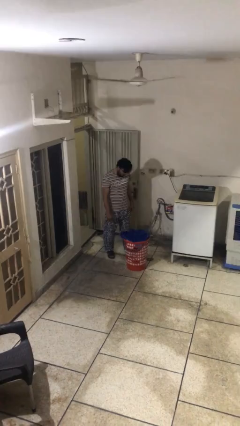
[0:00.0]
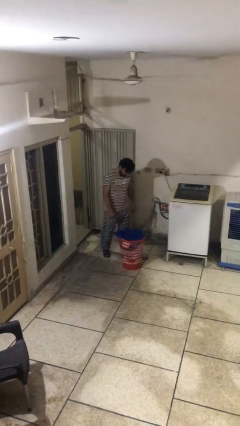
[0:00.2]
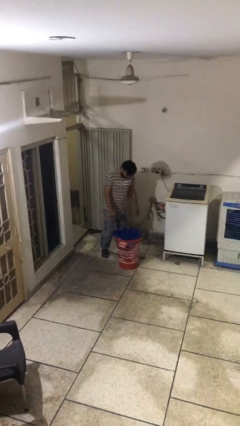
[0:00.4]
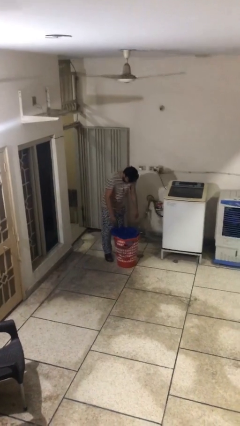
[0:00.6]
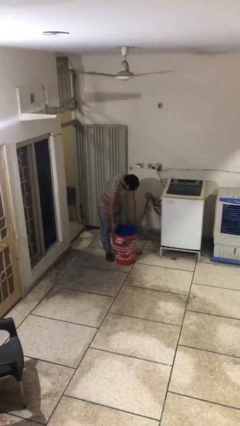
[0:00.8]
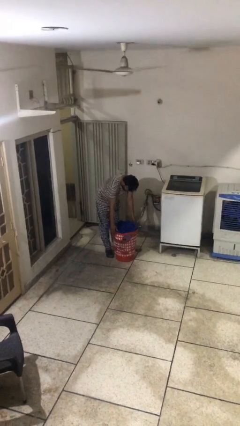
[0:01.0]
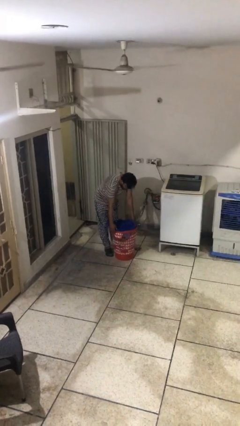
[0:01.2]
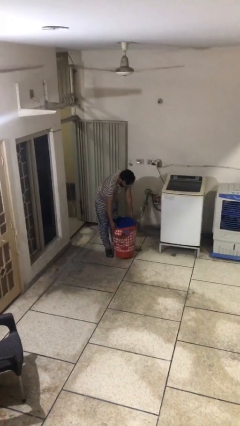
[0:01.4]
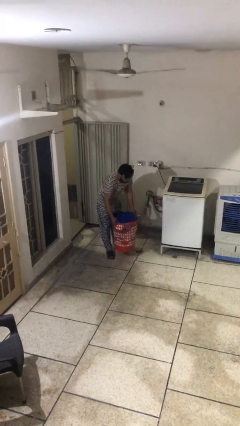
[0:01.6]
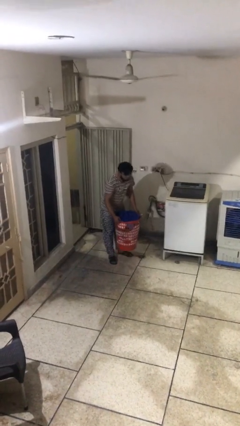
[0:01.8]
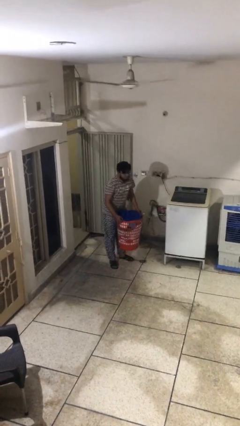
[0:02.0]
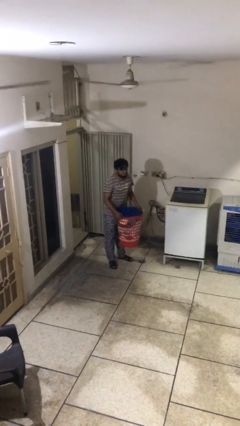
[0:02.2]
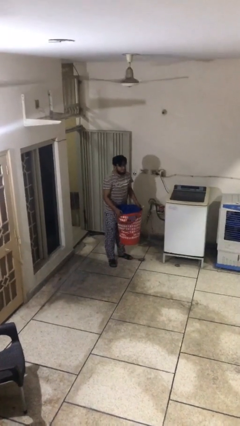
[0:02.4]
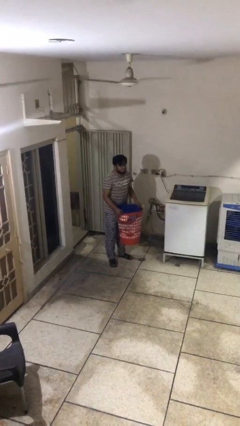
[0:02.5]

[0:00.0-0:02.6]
person picks up object from floor

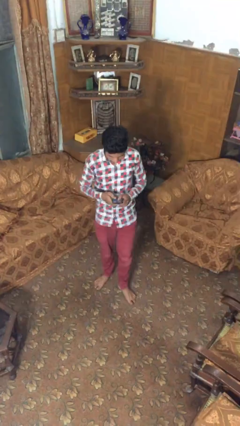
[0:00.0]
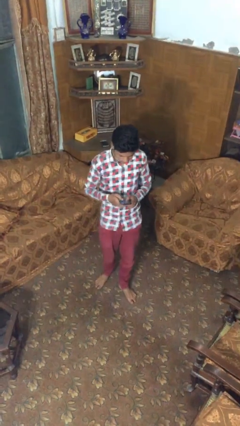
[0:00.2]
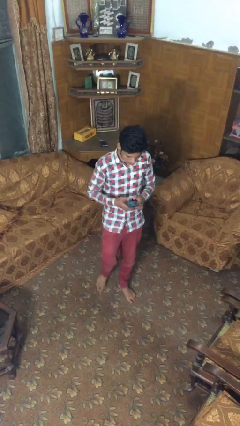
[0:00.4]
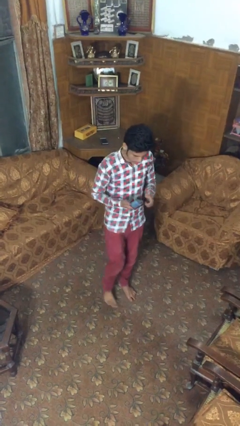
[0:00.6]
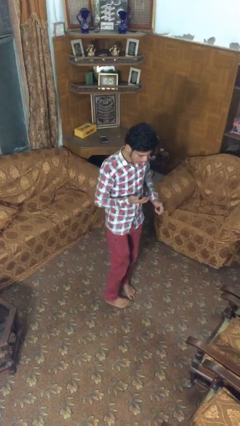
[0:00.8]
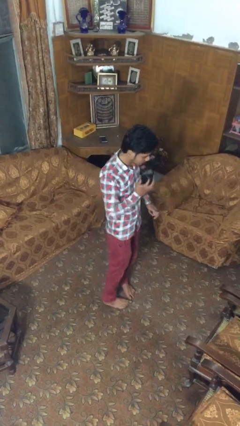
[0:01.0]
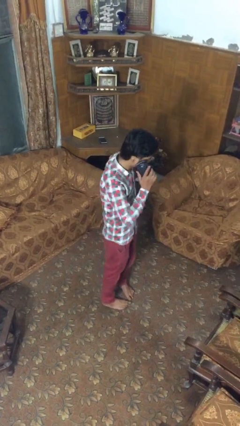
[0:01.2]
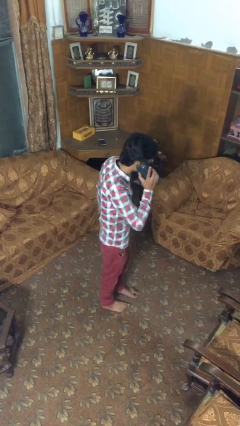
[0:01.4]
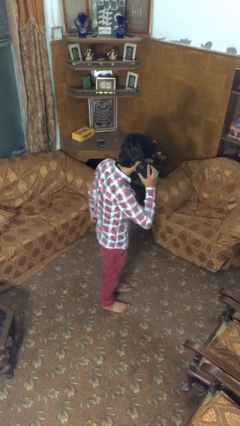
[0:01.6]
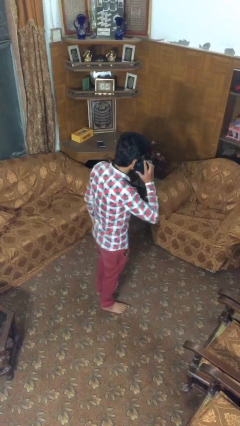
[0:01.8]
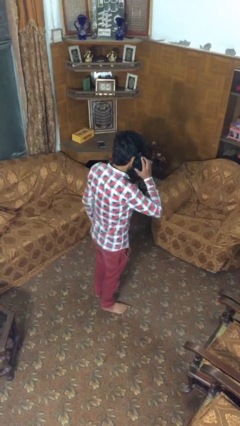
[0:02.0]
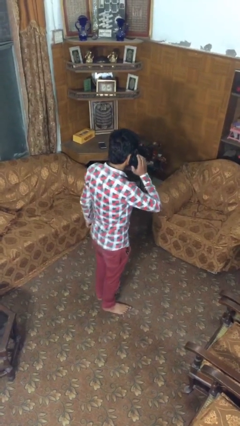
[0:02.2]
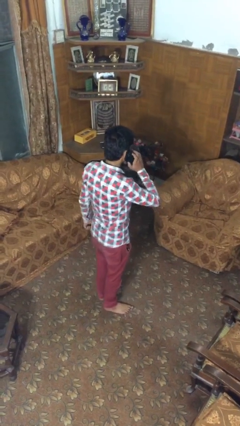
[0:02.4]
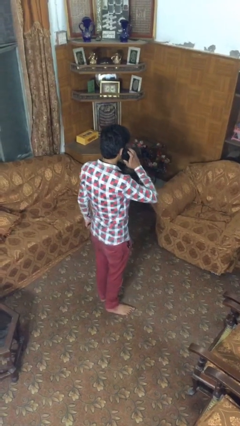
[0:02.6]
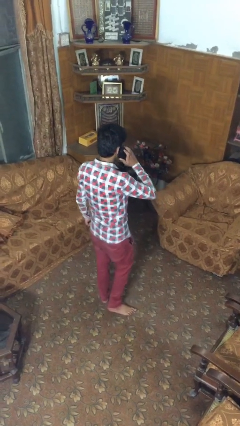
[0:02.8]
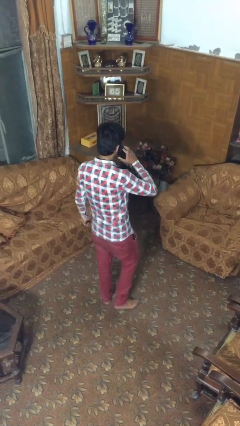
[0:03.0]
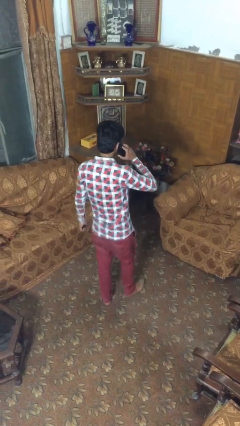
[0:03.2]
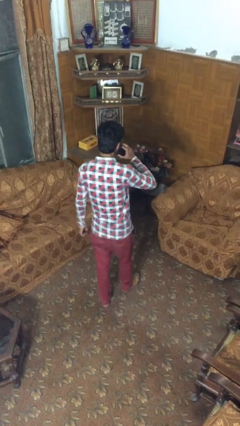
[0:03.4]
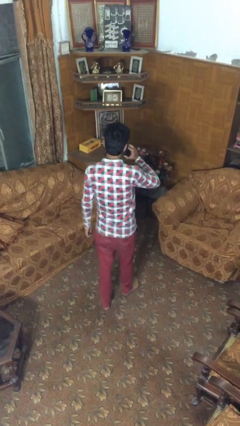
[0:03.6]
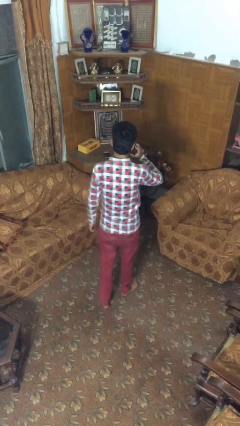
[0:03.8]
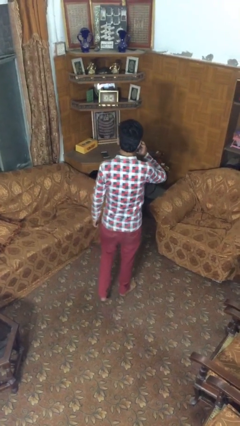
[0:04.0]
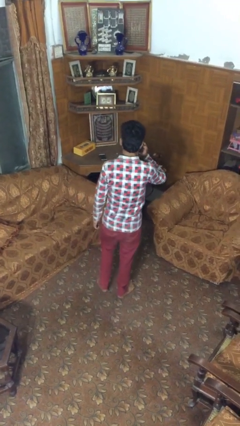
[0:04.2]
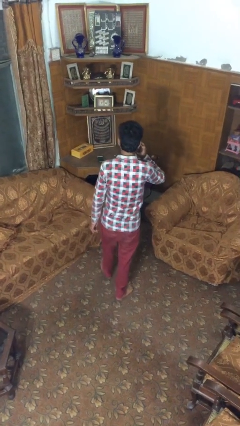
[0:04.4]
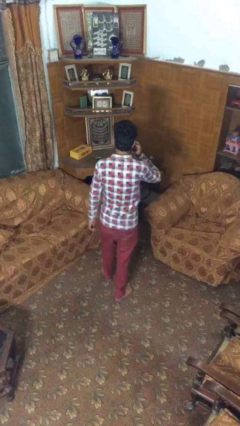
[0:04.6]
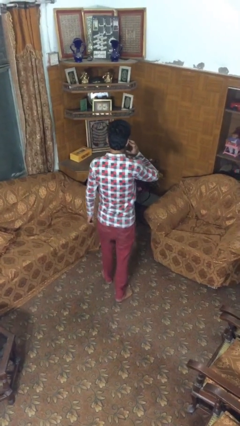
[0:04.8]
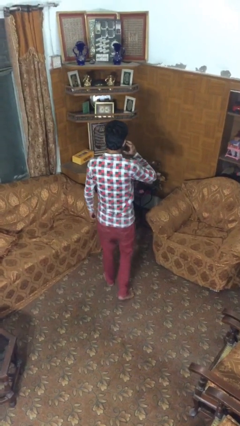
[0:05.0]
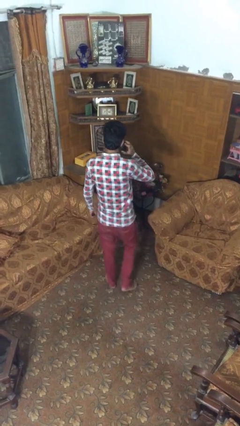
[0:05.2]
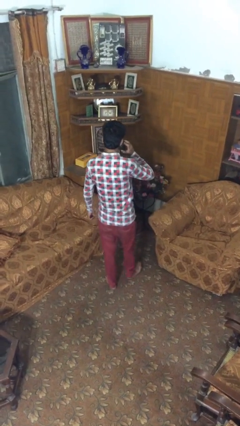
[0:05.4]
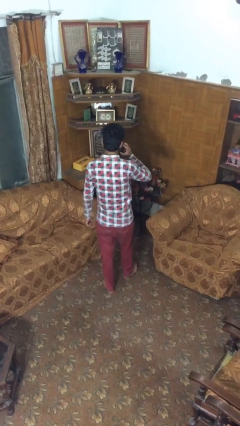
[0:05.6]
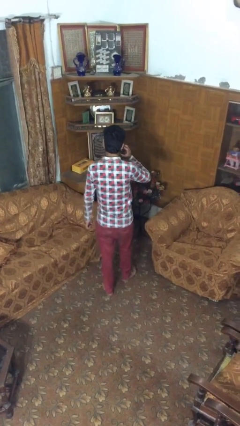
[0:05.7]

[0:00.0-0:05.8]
person talks on phone

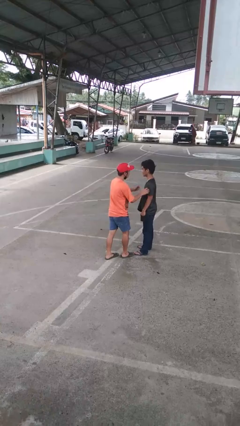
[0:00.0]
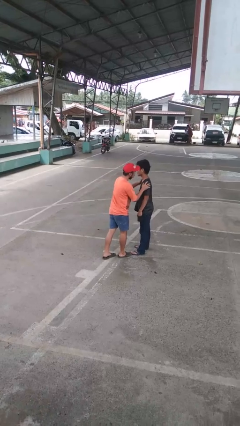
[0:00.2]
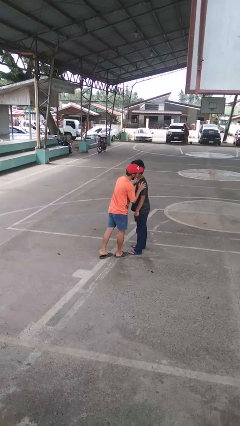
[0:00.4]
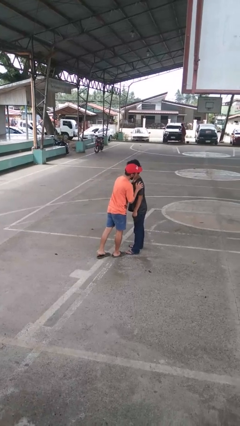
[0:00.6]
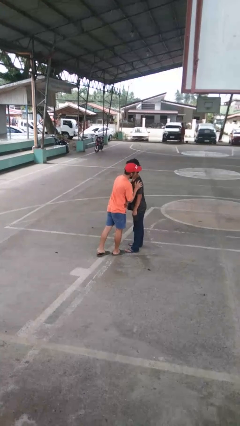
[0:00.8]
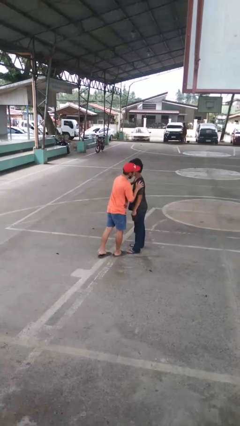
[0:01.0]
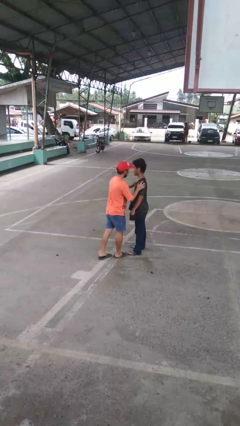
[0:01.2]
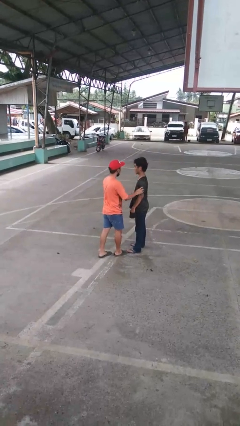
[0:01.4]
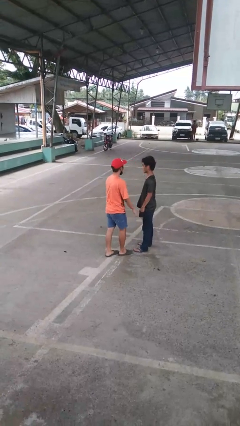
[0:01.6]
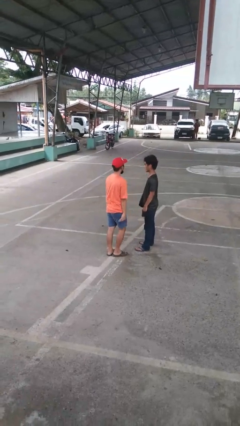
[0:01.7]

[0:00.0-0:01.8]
person kisses cheek of person

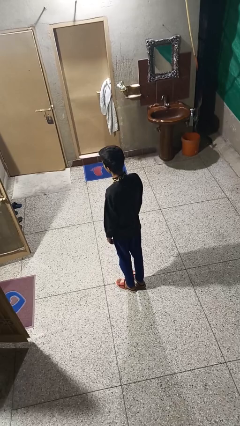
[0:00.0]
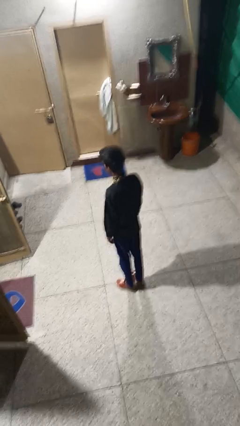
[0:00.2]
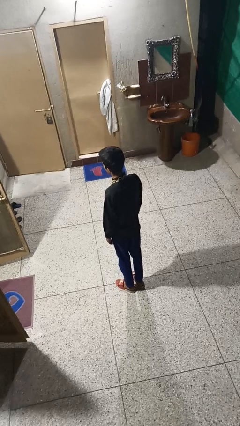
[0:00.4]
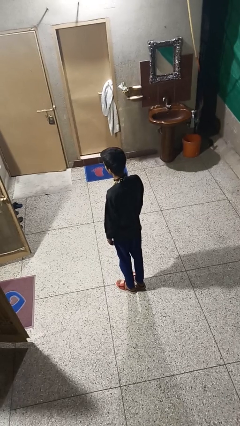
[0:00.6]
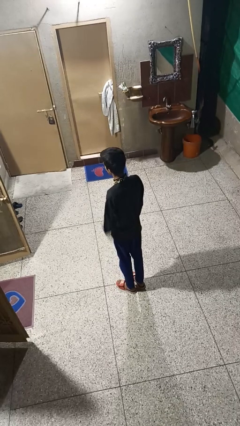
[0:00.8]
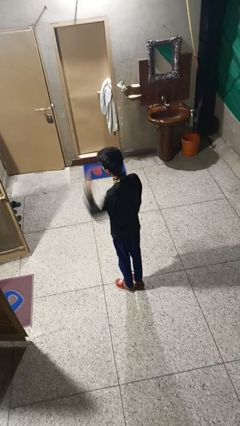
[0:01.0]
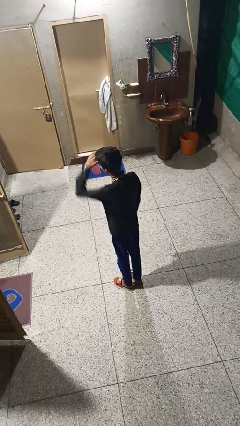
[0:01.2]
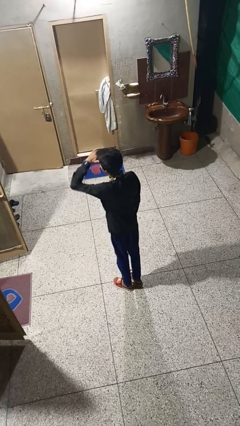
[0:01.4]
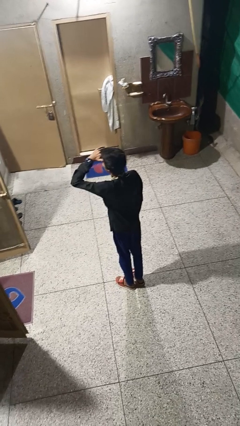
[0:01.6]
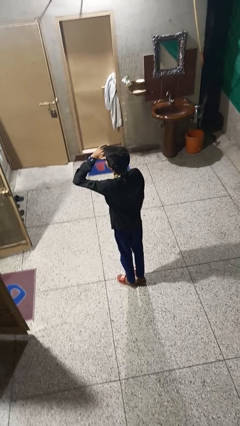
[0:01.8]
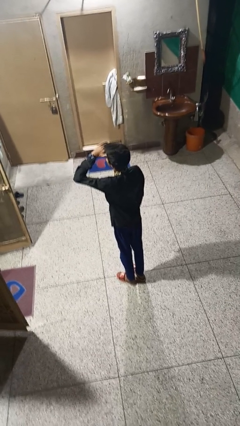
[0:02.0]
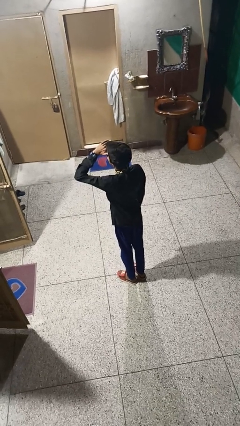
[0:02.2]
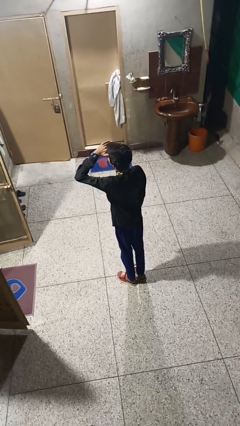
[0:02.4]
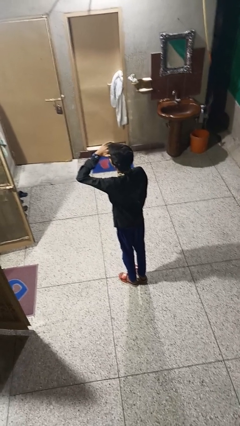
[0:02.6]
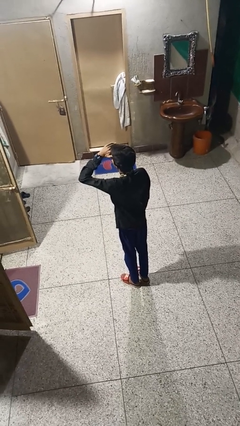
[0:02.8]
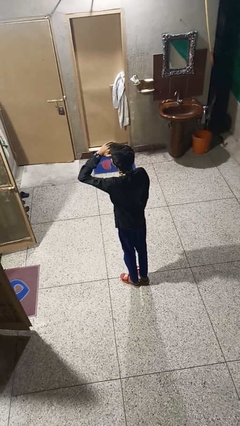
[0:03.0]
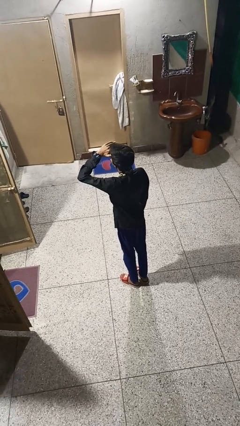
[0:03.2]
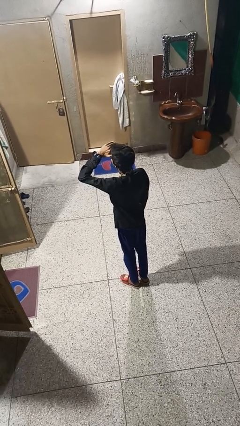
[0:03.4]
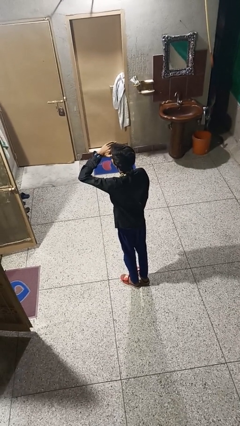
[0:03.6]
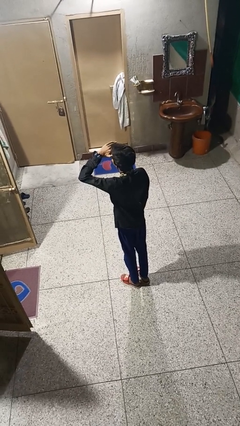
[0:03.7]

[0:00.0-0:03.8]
person shades eyes

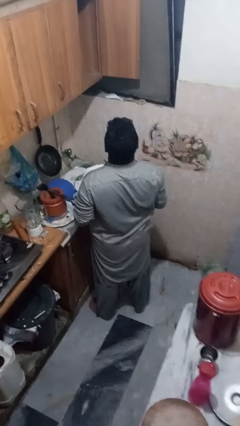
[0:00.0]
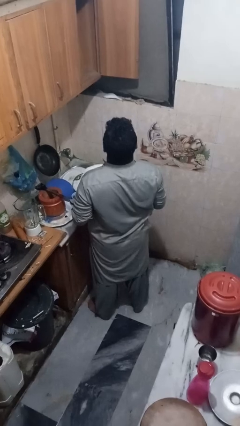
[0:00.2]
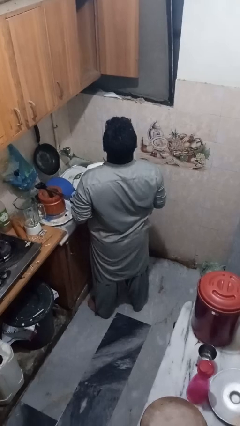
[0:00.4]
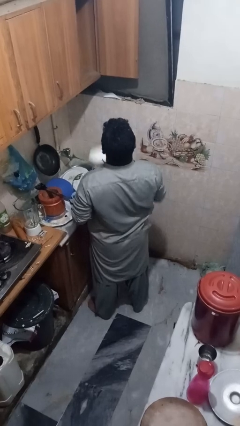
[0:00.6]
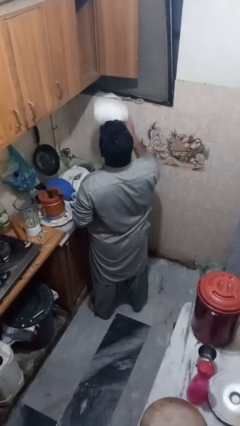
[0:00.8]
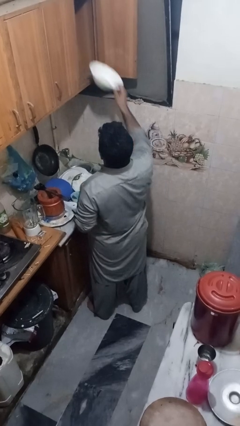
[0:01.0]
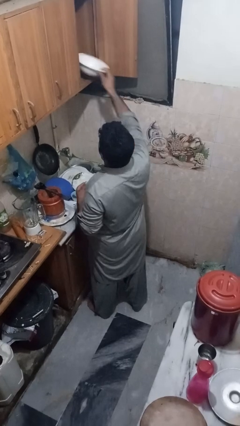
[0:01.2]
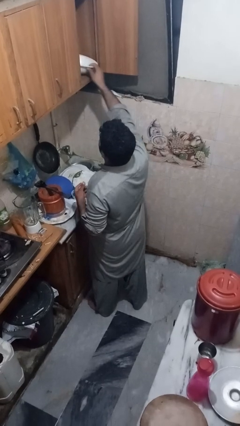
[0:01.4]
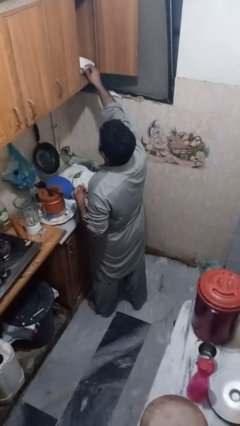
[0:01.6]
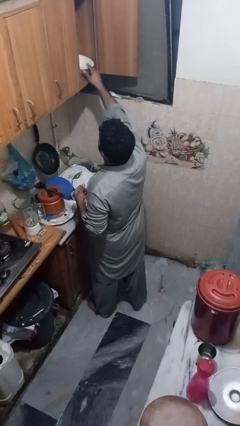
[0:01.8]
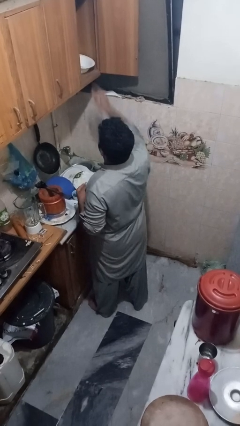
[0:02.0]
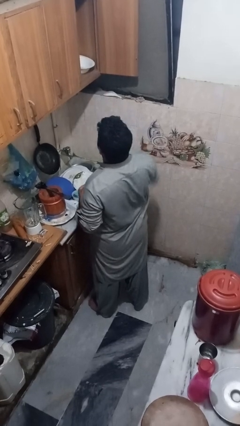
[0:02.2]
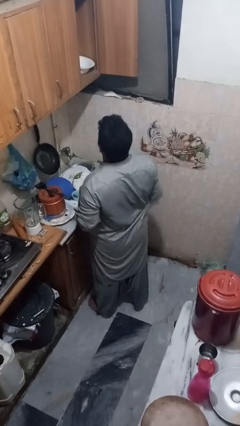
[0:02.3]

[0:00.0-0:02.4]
person puts object in cabinet

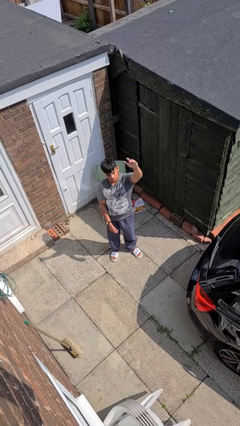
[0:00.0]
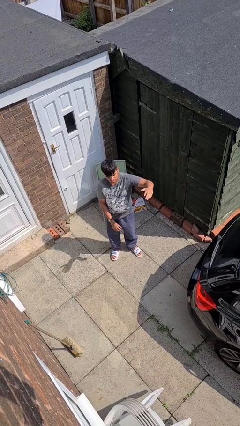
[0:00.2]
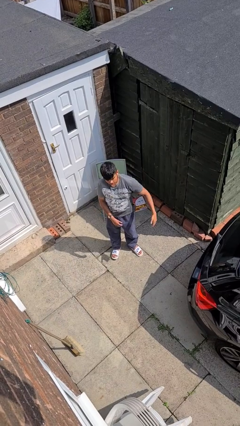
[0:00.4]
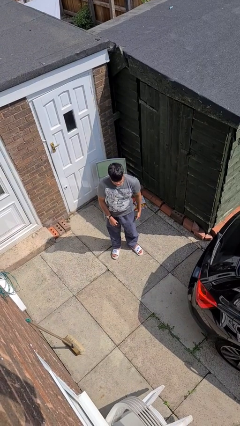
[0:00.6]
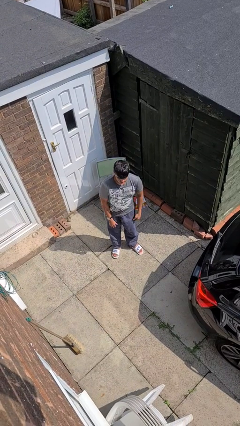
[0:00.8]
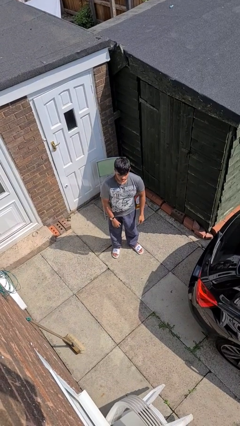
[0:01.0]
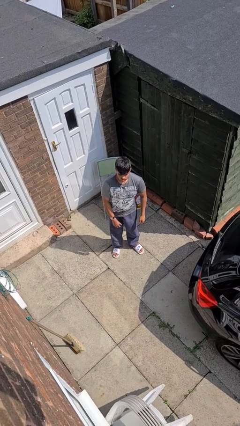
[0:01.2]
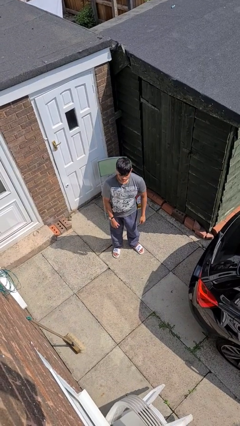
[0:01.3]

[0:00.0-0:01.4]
person gestures lower hand
